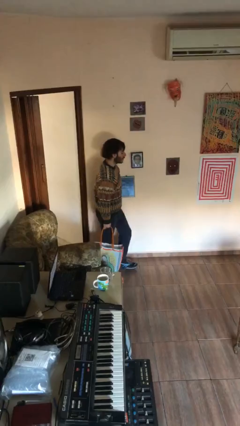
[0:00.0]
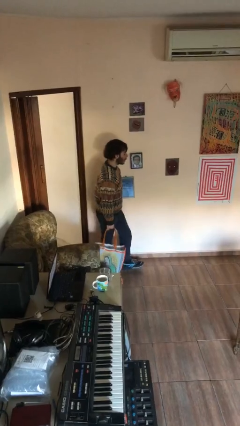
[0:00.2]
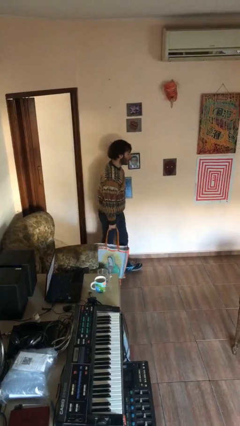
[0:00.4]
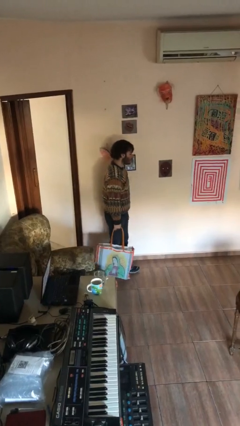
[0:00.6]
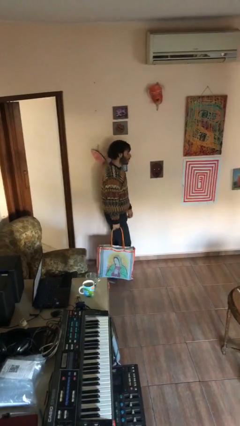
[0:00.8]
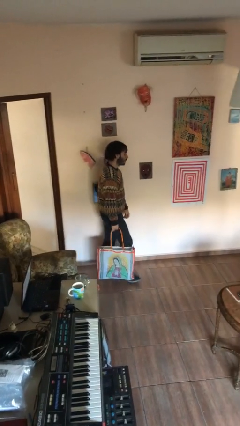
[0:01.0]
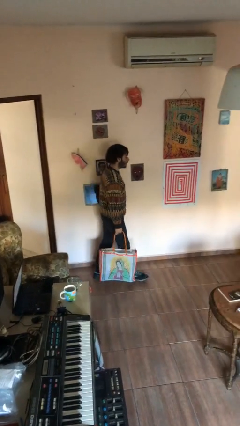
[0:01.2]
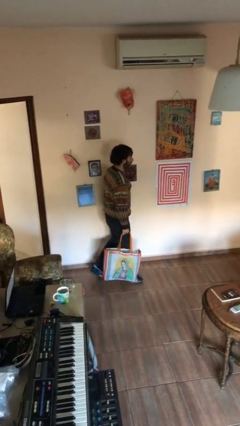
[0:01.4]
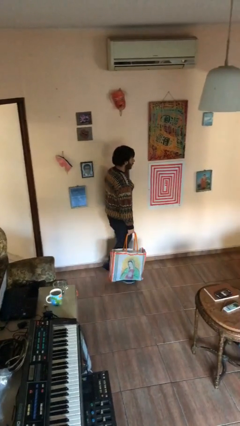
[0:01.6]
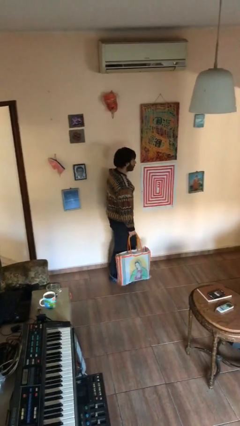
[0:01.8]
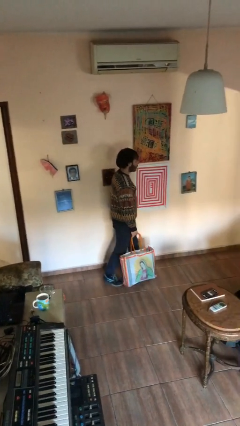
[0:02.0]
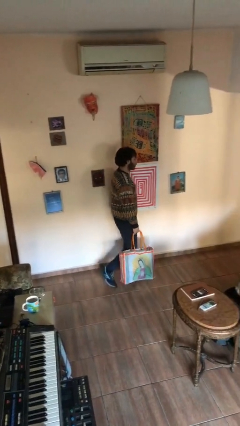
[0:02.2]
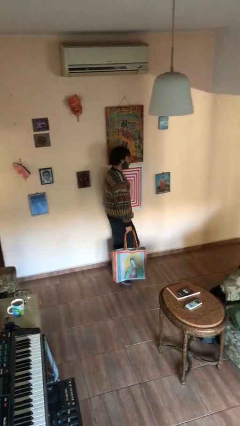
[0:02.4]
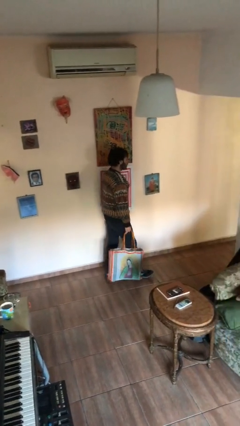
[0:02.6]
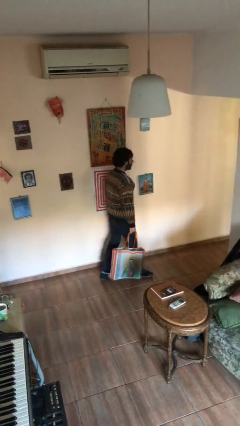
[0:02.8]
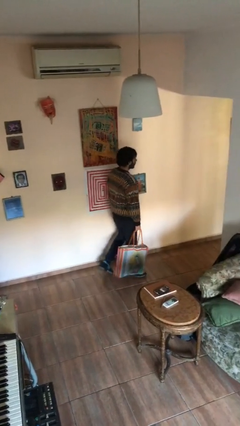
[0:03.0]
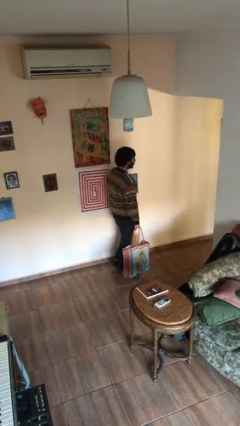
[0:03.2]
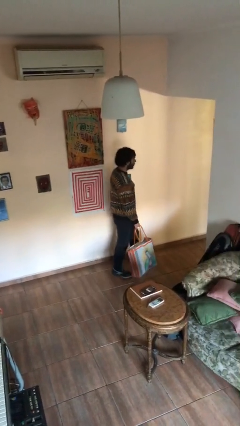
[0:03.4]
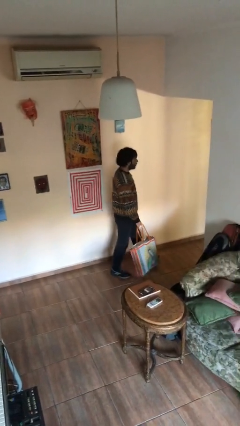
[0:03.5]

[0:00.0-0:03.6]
person carries groceries

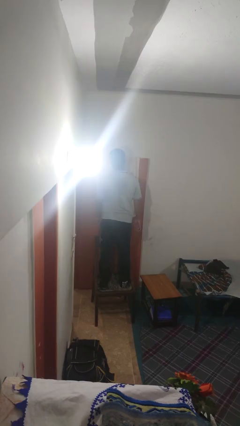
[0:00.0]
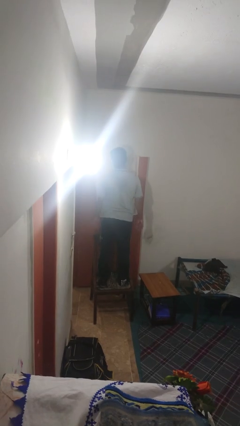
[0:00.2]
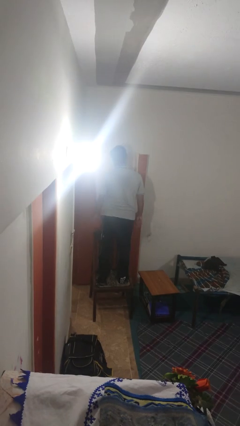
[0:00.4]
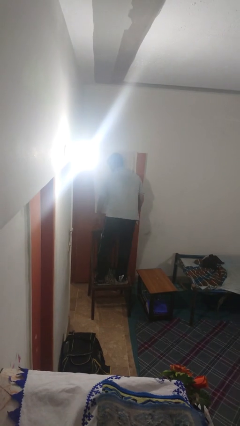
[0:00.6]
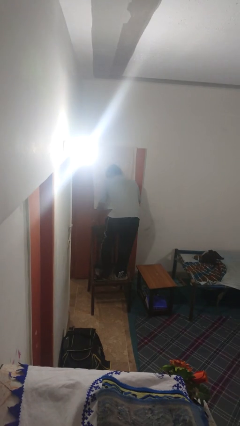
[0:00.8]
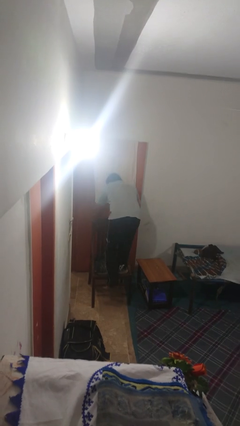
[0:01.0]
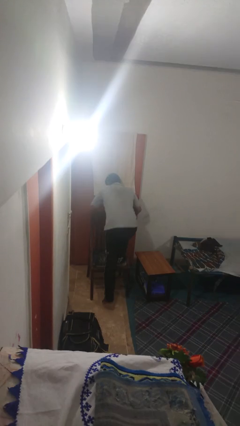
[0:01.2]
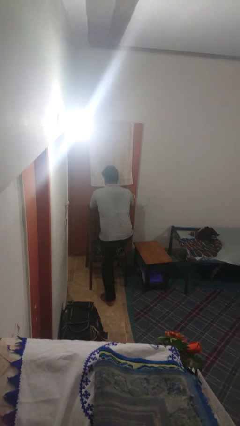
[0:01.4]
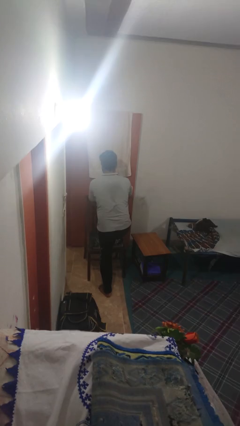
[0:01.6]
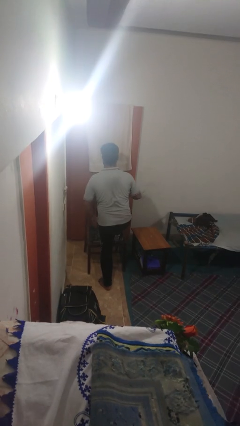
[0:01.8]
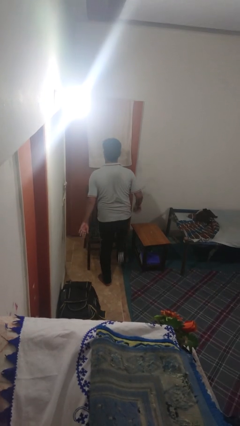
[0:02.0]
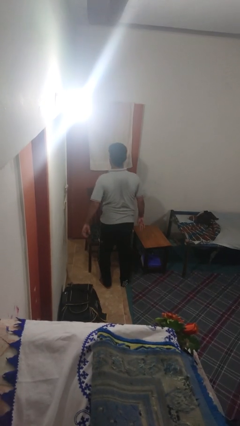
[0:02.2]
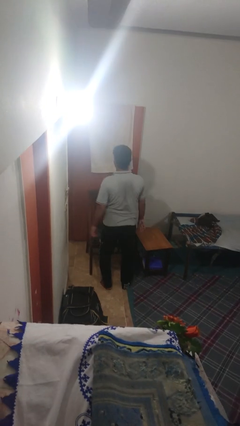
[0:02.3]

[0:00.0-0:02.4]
person climbs off chair

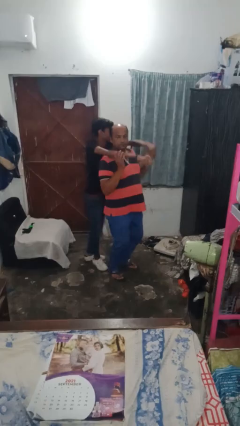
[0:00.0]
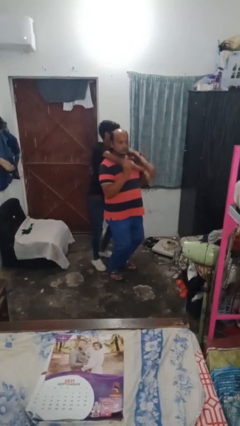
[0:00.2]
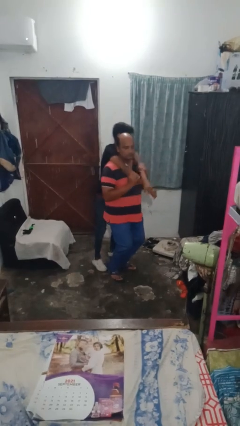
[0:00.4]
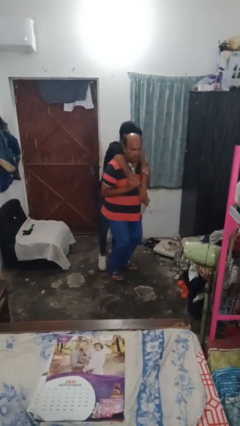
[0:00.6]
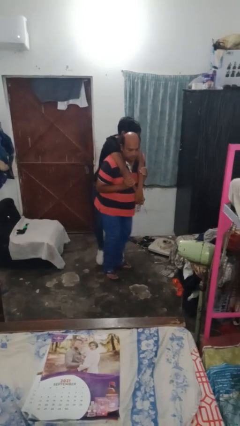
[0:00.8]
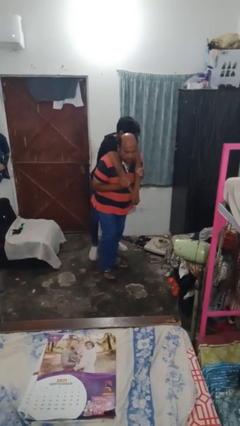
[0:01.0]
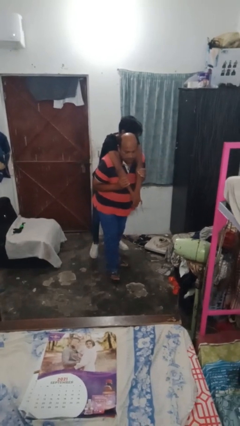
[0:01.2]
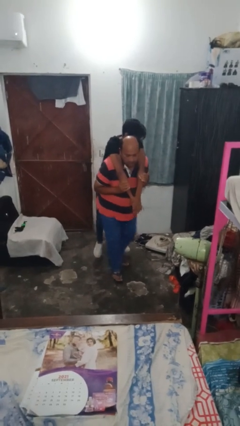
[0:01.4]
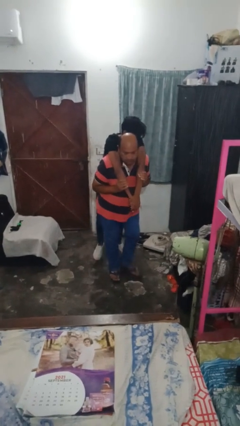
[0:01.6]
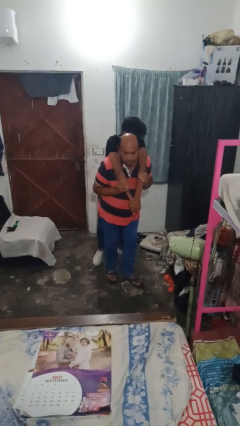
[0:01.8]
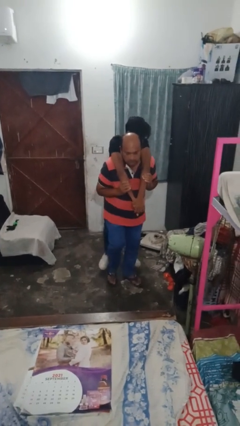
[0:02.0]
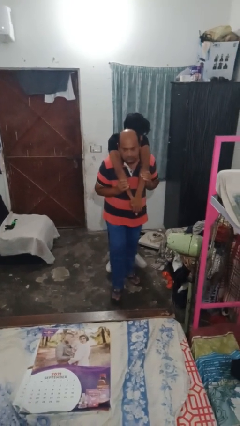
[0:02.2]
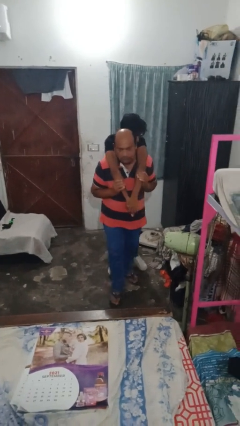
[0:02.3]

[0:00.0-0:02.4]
person carries person on back

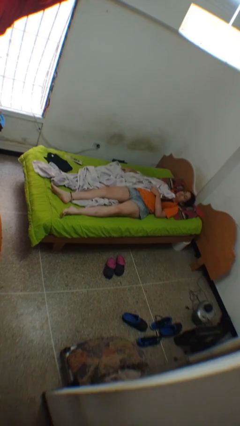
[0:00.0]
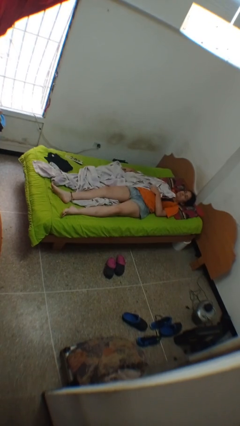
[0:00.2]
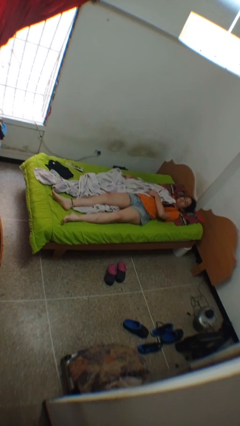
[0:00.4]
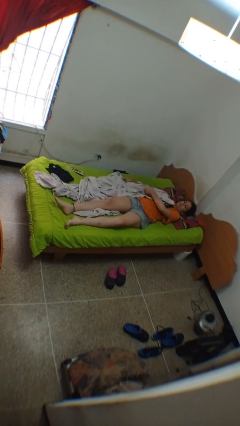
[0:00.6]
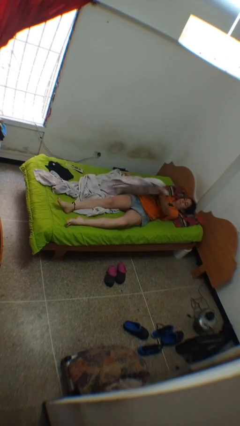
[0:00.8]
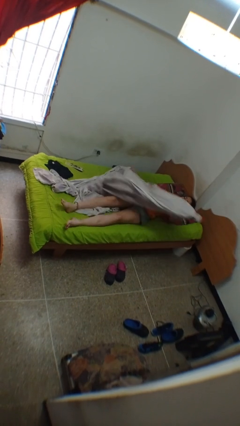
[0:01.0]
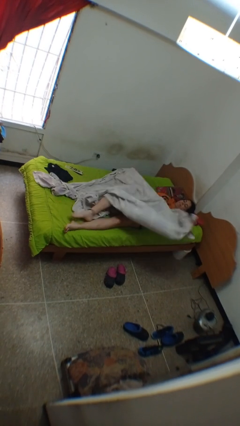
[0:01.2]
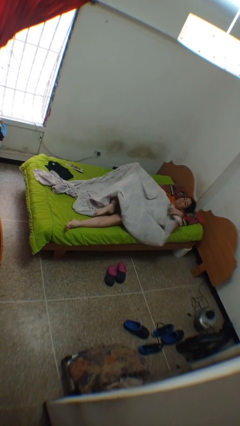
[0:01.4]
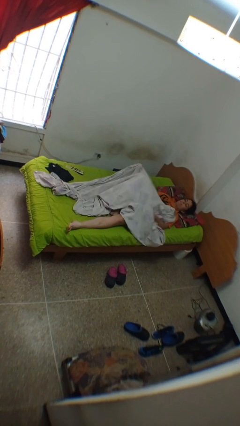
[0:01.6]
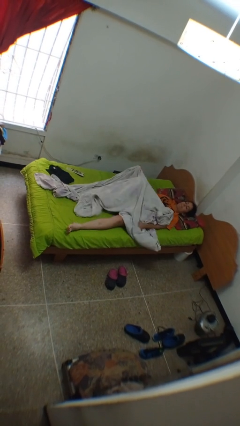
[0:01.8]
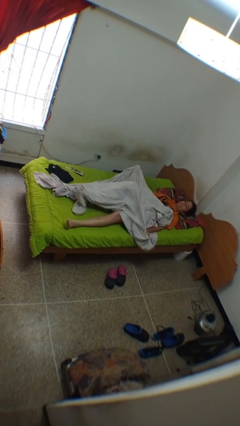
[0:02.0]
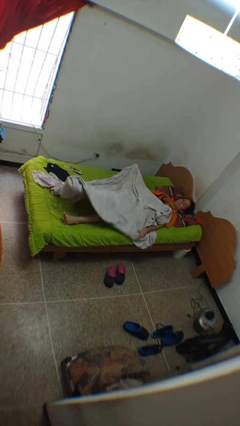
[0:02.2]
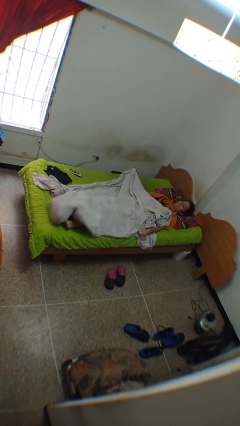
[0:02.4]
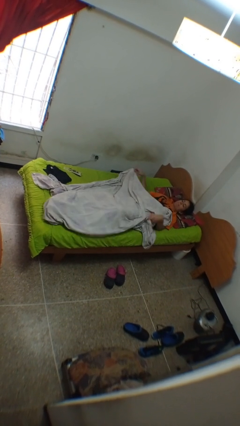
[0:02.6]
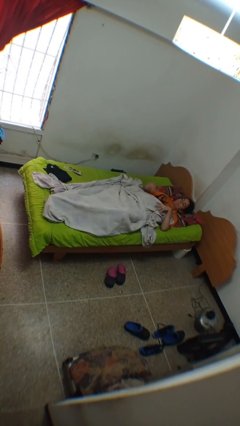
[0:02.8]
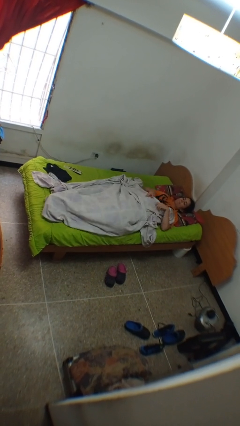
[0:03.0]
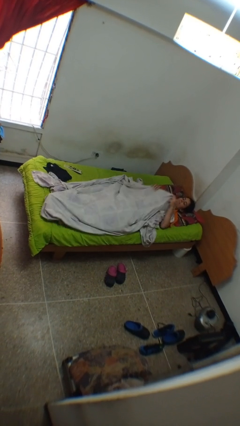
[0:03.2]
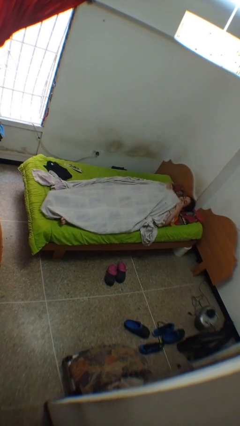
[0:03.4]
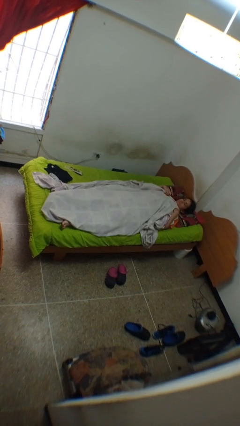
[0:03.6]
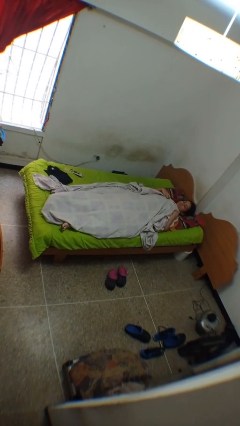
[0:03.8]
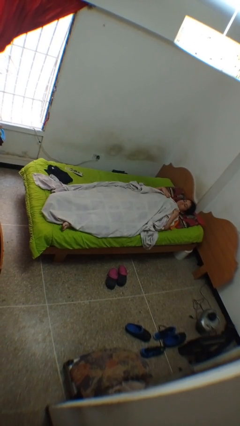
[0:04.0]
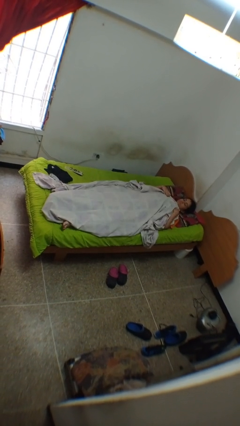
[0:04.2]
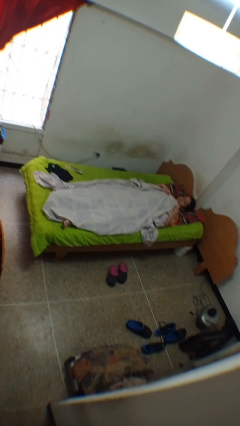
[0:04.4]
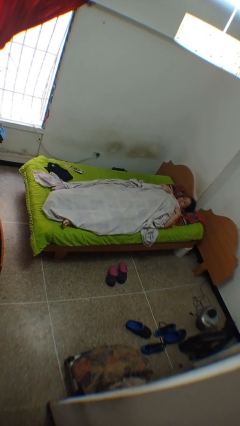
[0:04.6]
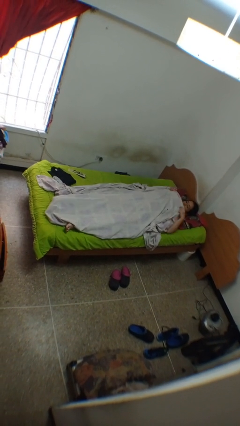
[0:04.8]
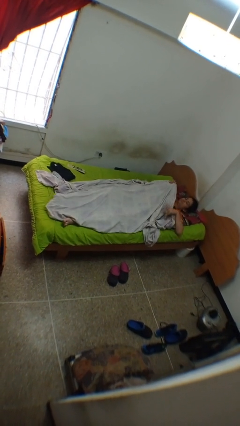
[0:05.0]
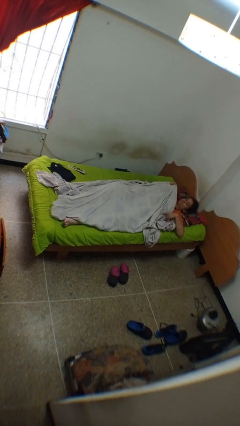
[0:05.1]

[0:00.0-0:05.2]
person covers with bedsheets

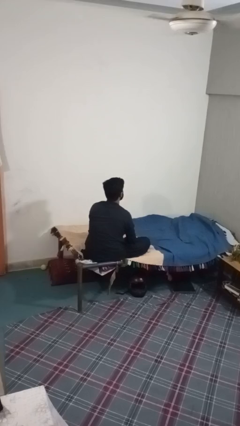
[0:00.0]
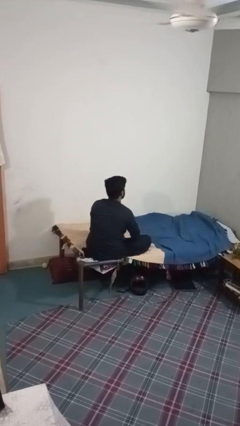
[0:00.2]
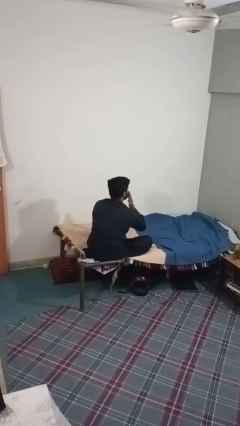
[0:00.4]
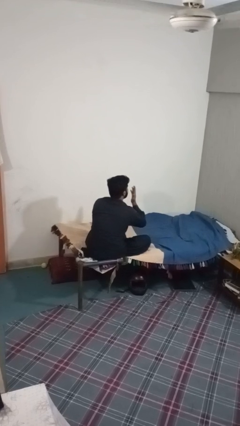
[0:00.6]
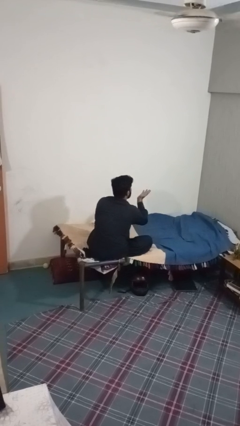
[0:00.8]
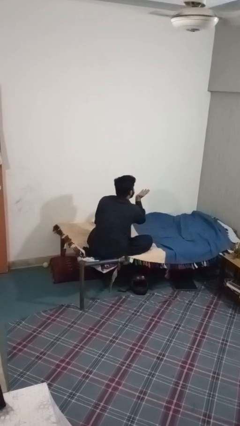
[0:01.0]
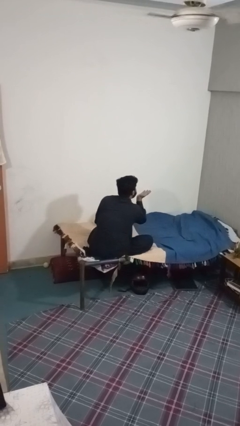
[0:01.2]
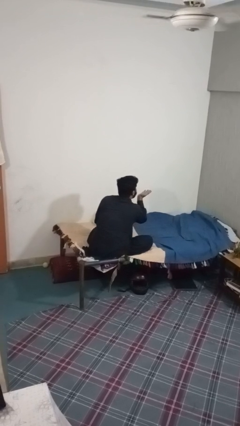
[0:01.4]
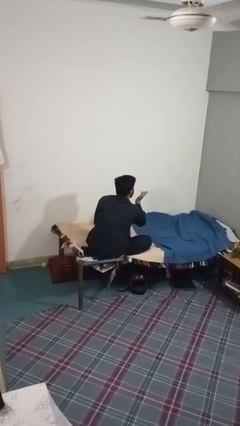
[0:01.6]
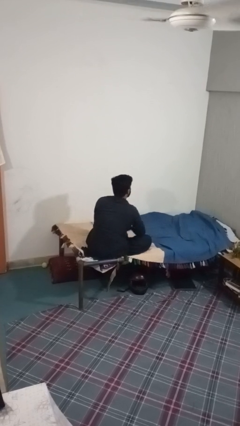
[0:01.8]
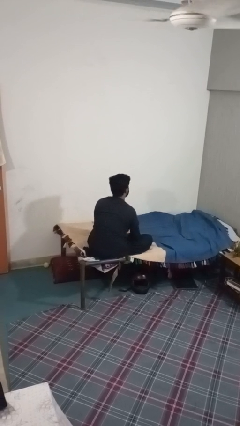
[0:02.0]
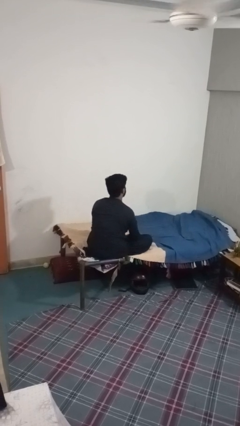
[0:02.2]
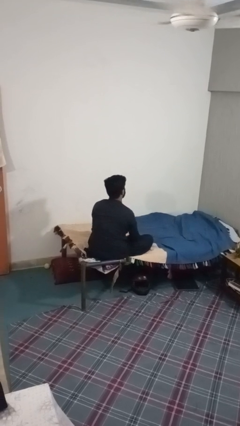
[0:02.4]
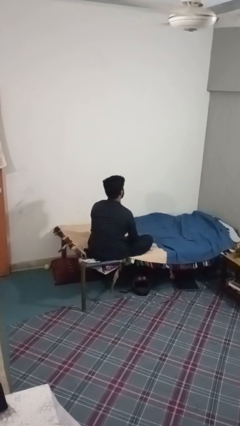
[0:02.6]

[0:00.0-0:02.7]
person gestures blow kiss

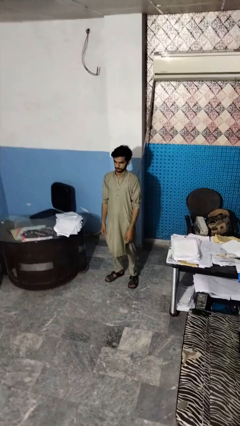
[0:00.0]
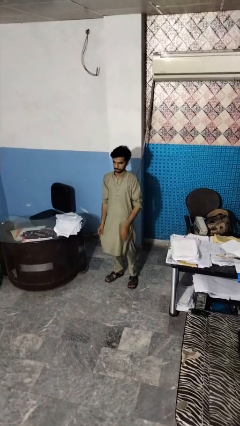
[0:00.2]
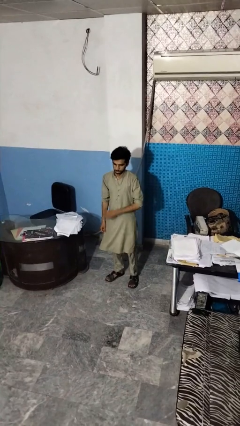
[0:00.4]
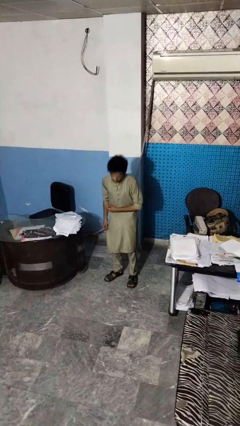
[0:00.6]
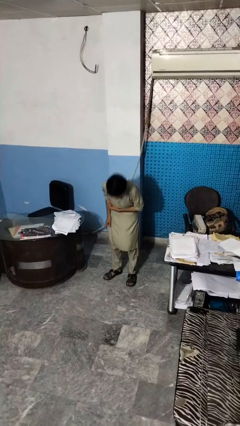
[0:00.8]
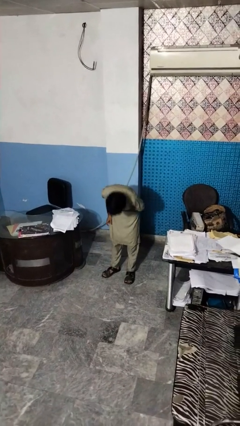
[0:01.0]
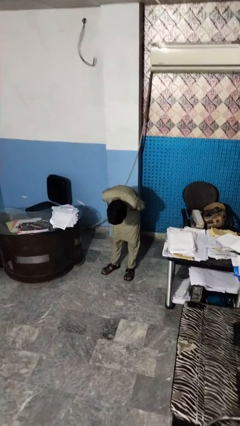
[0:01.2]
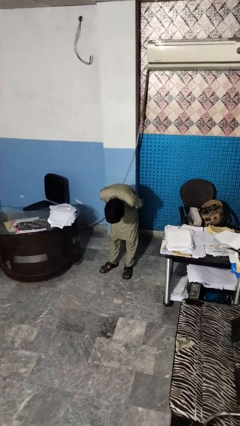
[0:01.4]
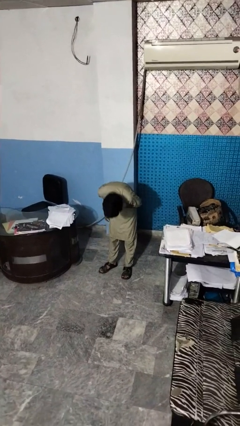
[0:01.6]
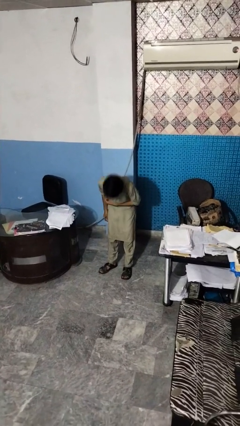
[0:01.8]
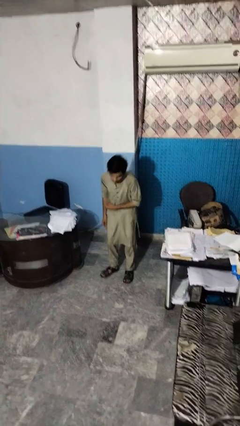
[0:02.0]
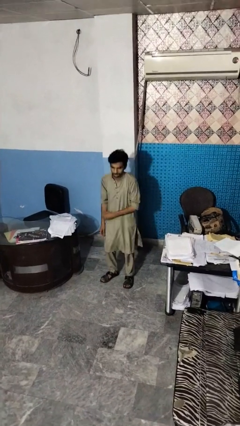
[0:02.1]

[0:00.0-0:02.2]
person bows
